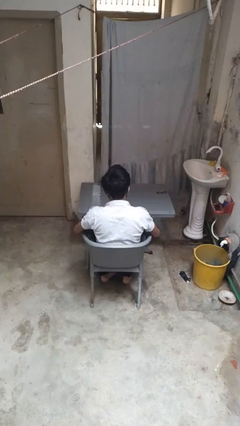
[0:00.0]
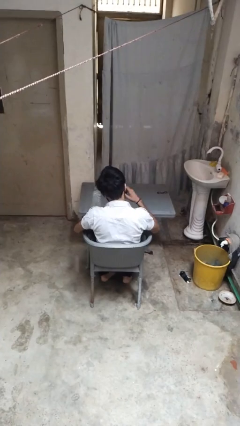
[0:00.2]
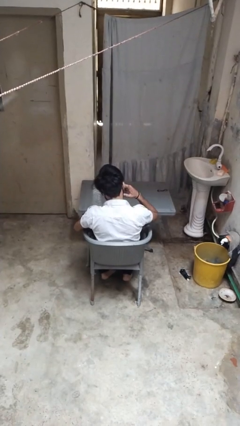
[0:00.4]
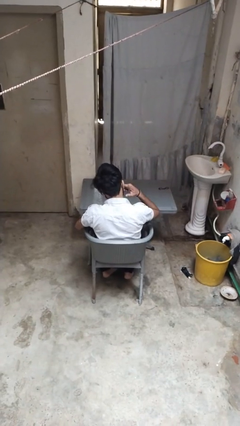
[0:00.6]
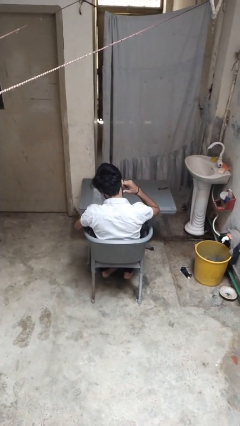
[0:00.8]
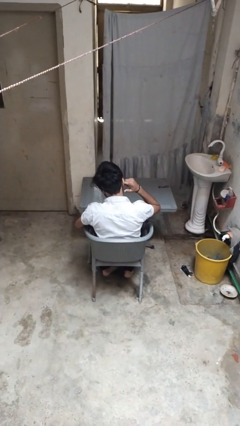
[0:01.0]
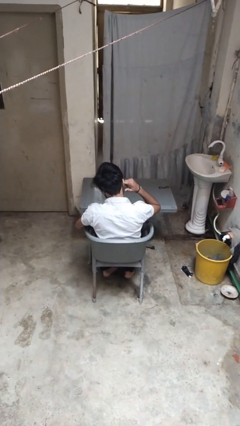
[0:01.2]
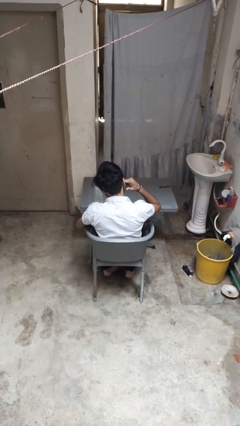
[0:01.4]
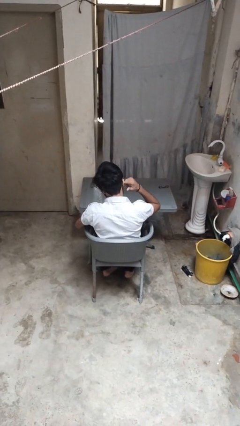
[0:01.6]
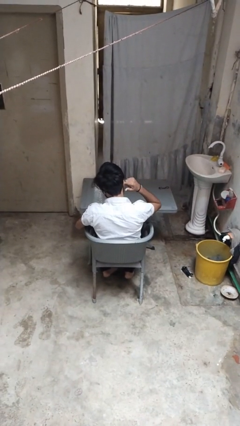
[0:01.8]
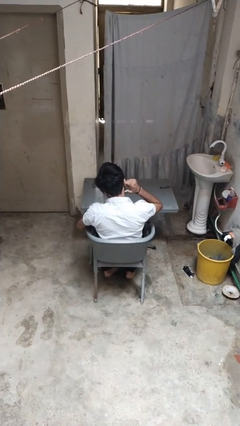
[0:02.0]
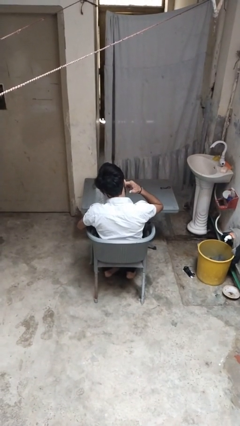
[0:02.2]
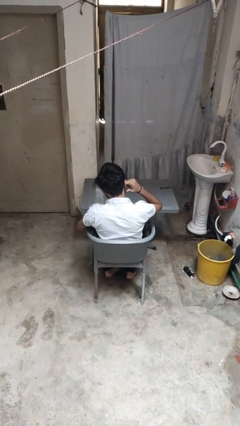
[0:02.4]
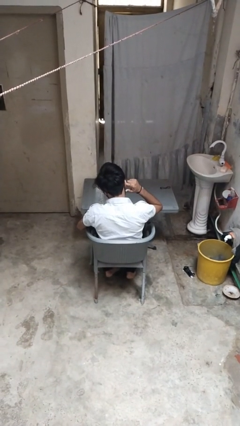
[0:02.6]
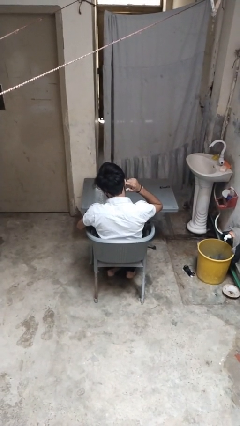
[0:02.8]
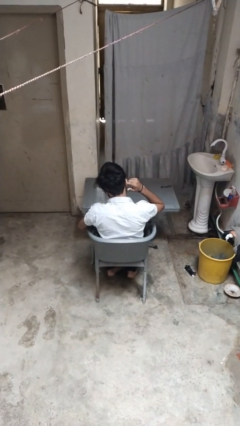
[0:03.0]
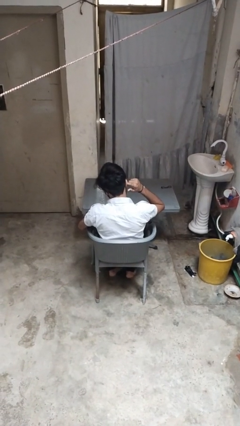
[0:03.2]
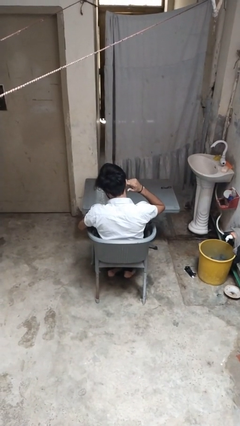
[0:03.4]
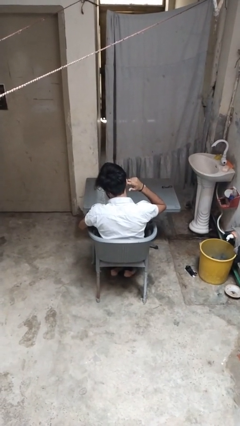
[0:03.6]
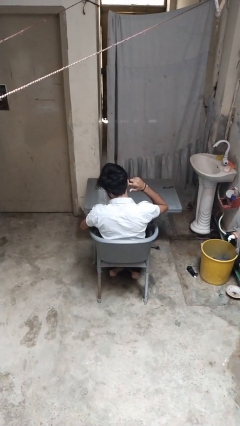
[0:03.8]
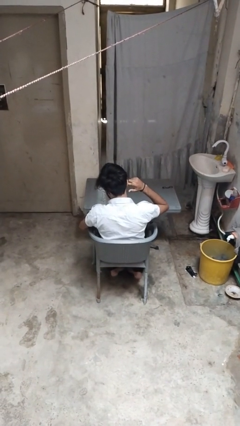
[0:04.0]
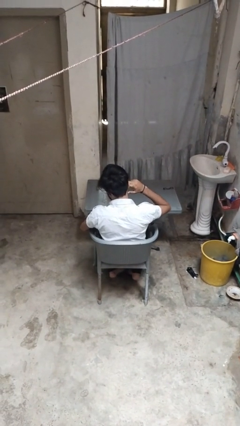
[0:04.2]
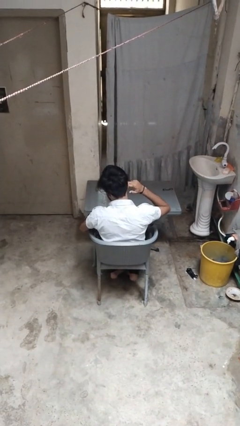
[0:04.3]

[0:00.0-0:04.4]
person puts fingers in ear

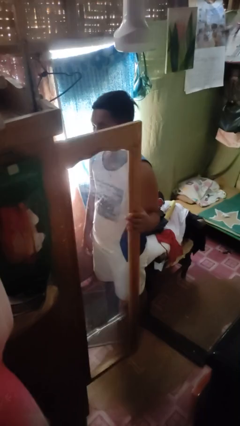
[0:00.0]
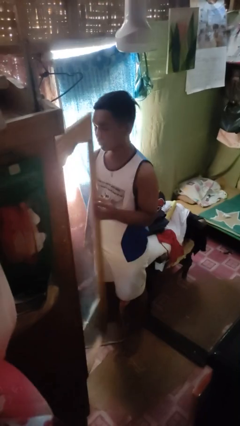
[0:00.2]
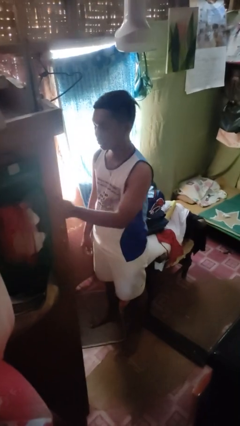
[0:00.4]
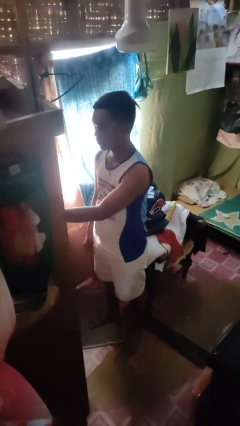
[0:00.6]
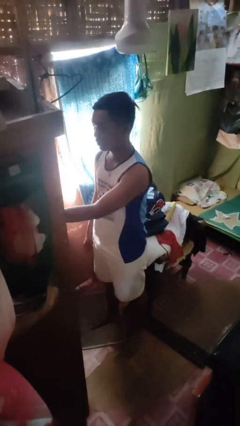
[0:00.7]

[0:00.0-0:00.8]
person closes closet door

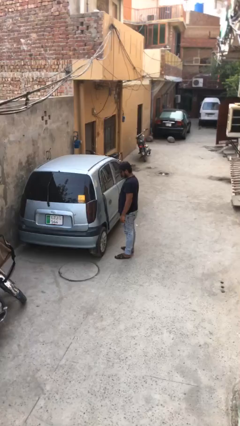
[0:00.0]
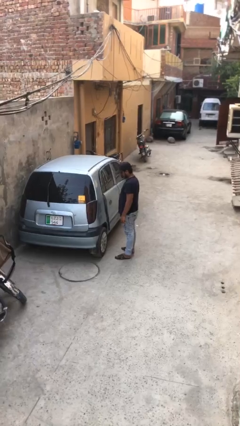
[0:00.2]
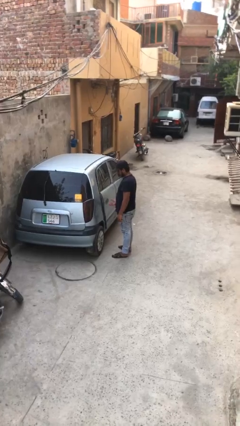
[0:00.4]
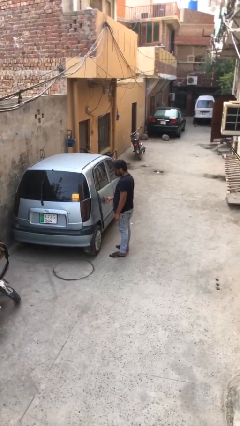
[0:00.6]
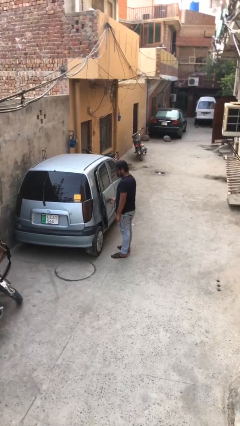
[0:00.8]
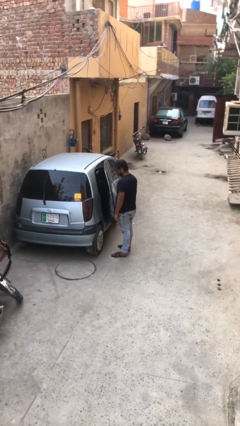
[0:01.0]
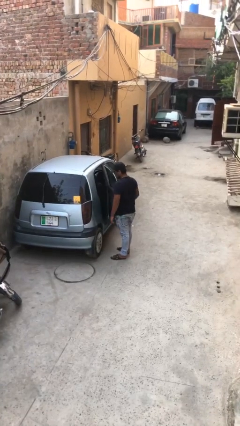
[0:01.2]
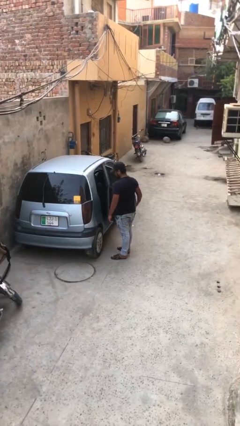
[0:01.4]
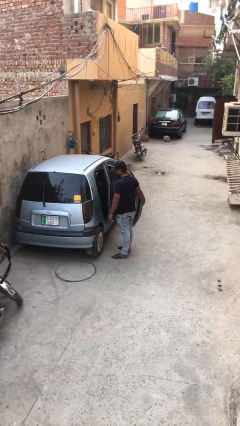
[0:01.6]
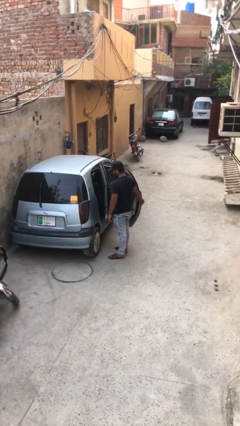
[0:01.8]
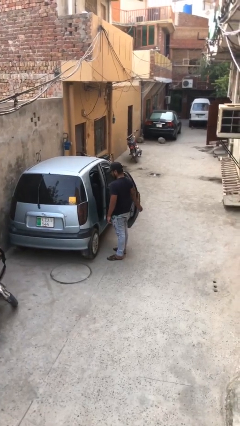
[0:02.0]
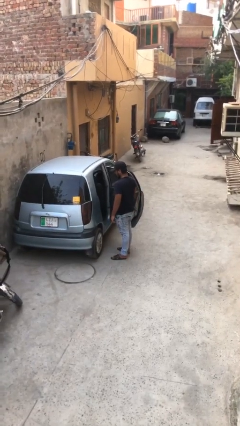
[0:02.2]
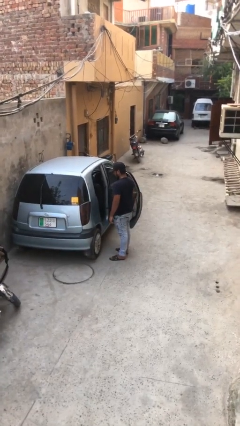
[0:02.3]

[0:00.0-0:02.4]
person opens car door

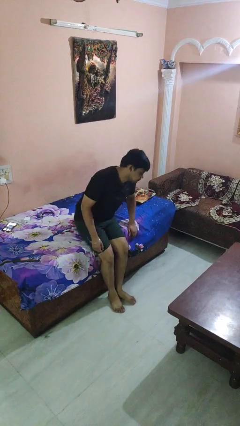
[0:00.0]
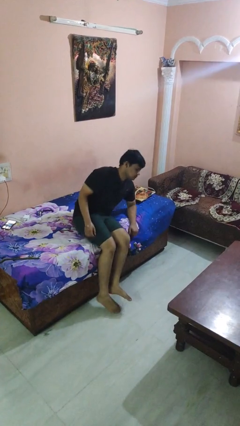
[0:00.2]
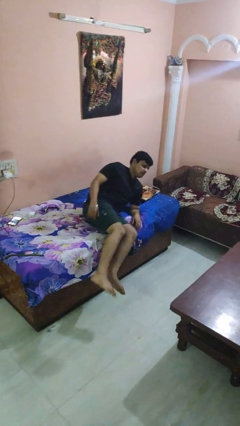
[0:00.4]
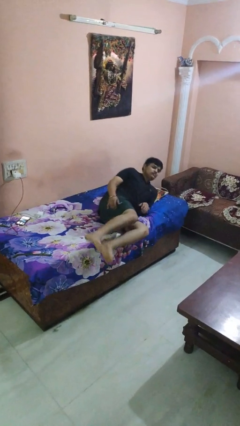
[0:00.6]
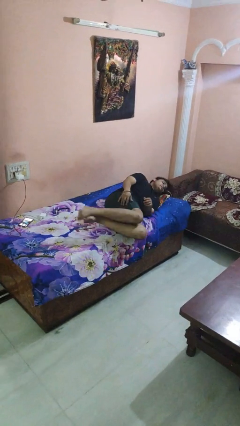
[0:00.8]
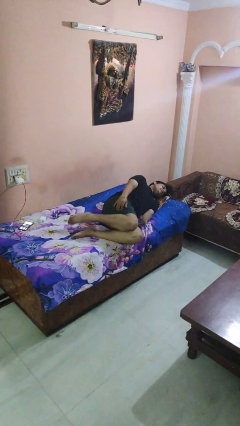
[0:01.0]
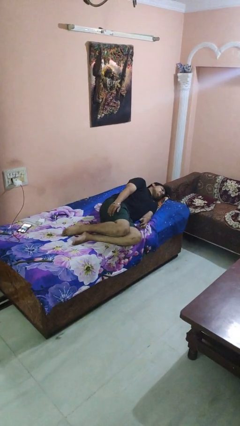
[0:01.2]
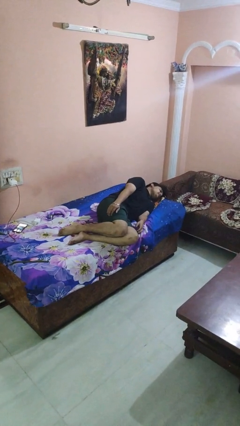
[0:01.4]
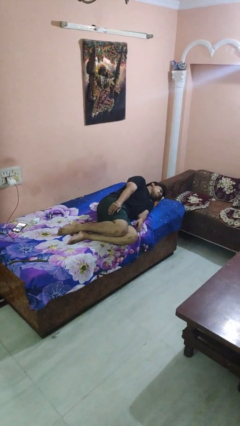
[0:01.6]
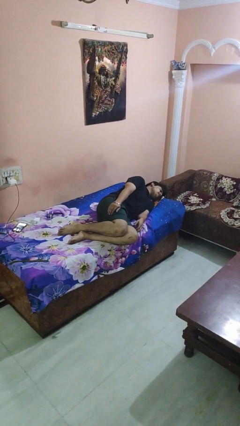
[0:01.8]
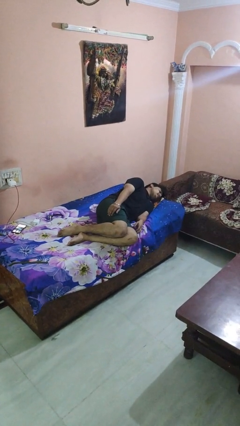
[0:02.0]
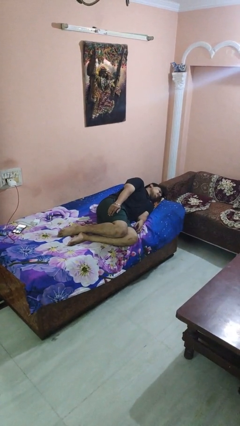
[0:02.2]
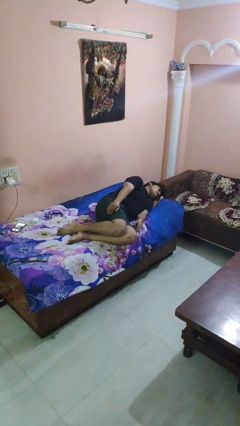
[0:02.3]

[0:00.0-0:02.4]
person lies down on bed

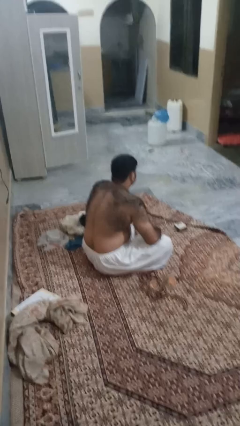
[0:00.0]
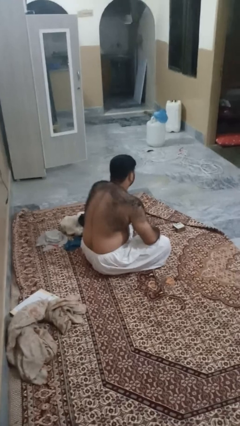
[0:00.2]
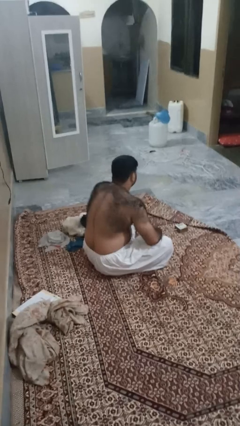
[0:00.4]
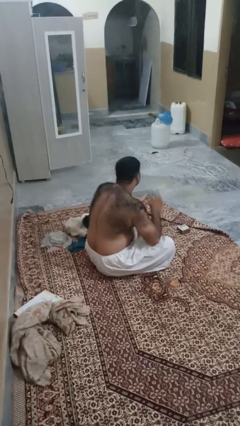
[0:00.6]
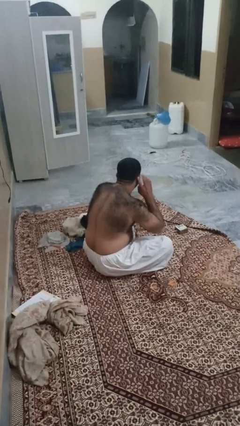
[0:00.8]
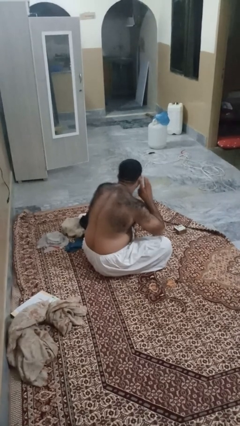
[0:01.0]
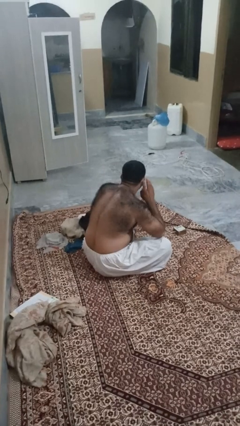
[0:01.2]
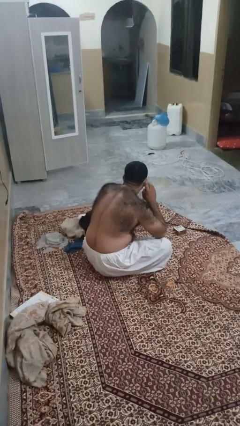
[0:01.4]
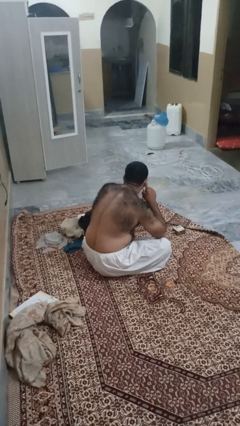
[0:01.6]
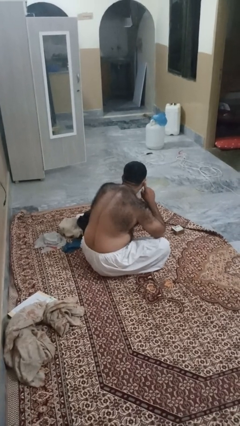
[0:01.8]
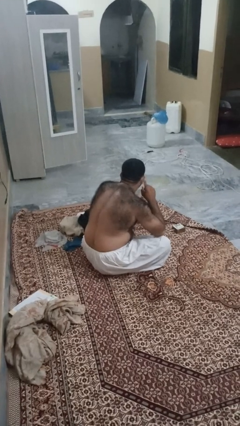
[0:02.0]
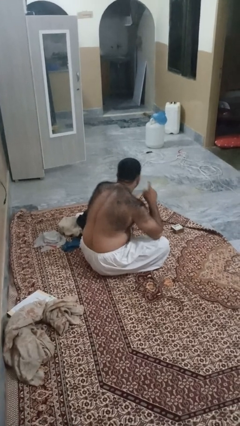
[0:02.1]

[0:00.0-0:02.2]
person gestures listen closely

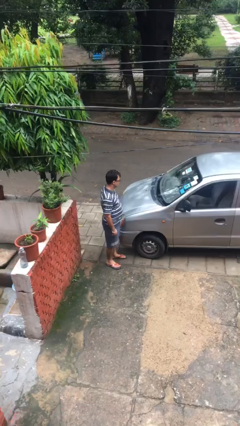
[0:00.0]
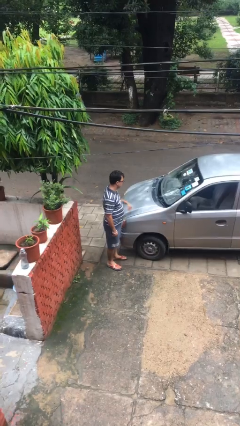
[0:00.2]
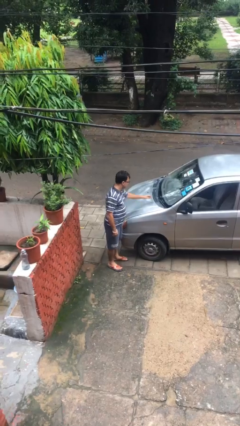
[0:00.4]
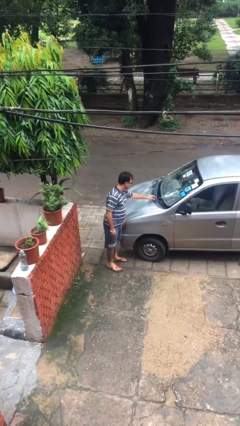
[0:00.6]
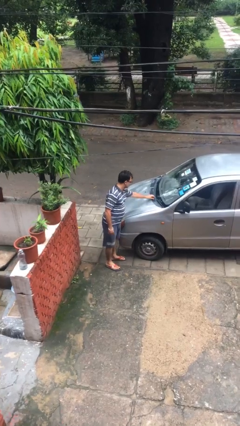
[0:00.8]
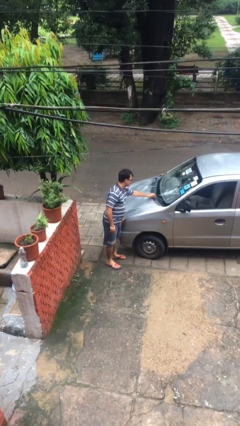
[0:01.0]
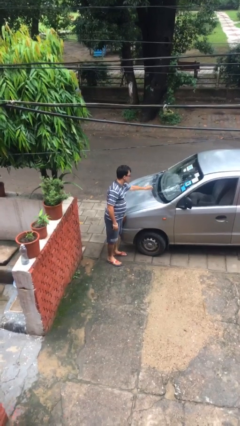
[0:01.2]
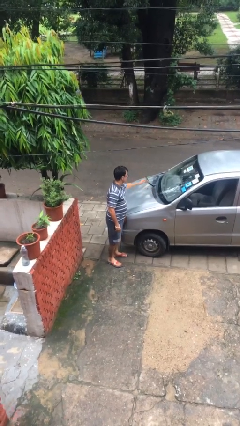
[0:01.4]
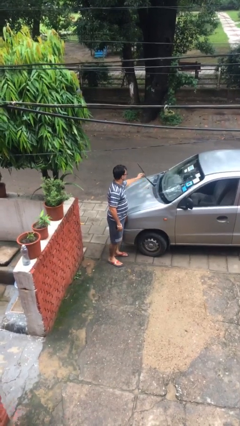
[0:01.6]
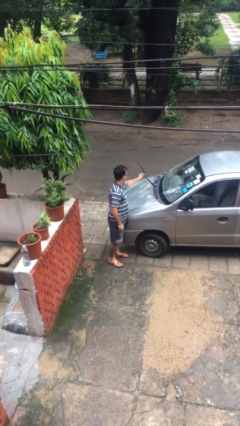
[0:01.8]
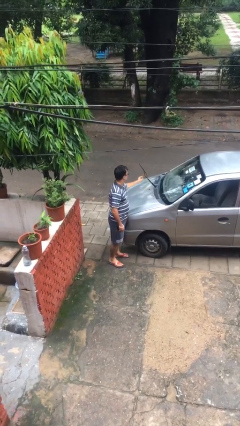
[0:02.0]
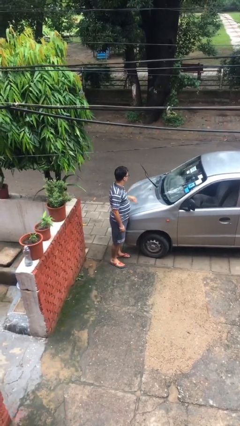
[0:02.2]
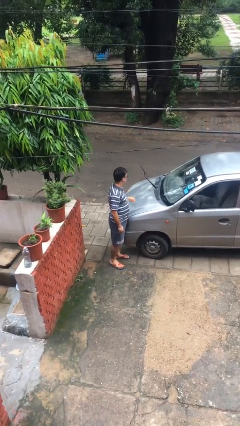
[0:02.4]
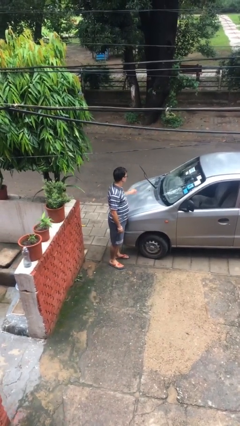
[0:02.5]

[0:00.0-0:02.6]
person flips up car wipers

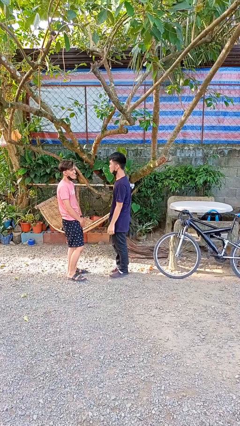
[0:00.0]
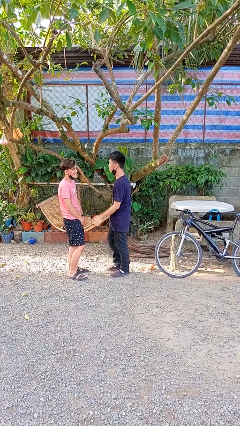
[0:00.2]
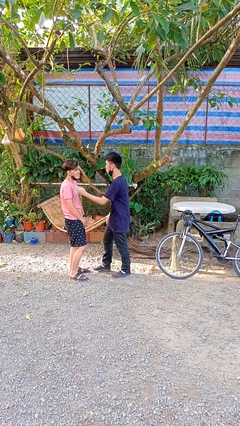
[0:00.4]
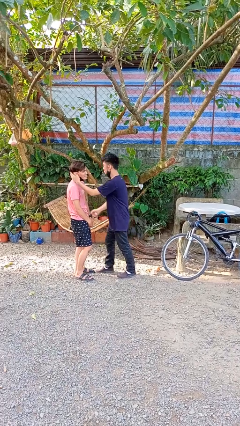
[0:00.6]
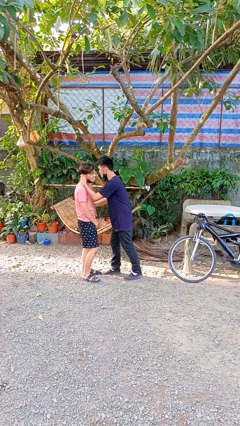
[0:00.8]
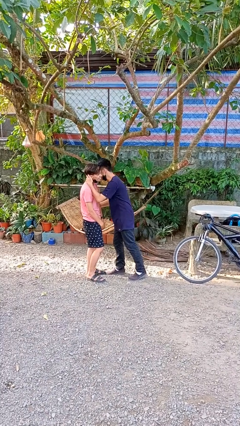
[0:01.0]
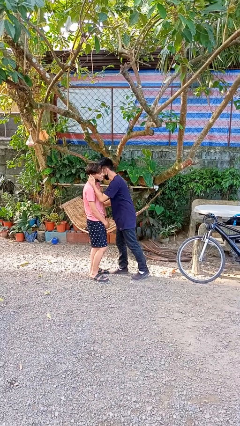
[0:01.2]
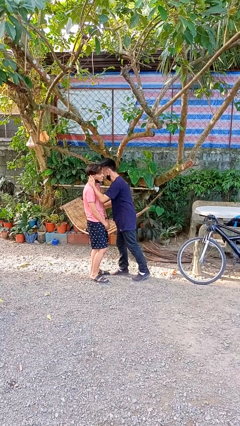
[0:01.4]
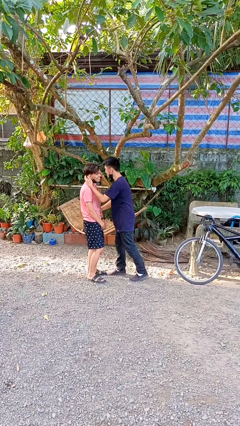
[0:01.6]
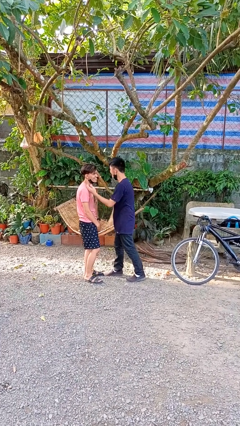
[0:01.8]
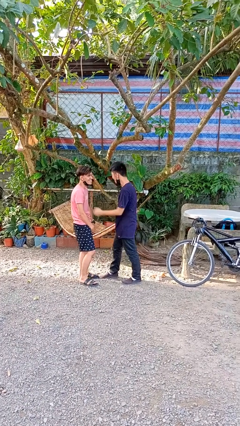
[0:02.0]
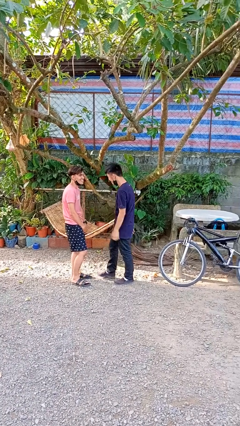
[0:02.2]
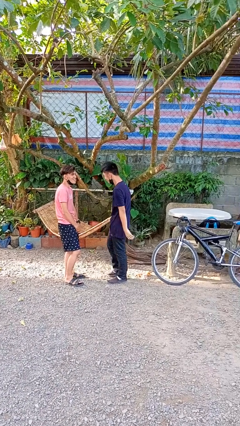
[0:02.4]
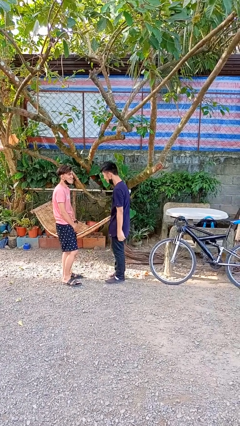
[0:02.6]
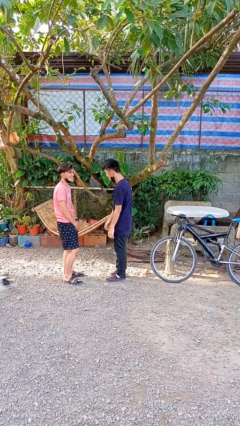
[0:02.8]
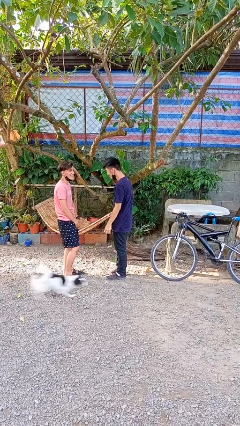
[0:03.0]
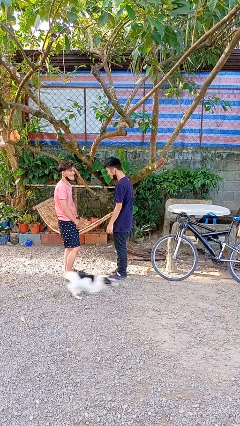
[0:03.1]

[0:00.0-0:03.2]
person kisses cheek of person
